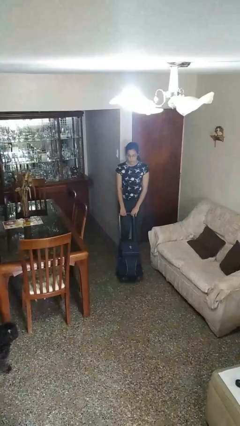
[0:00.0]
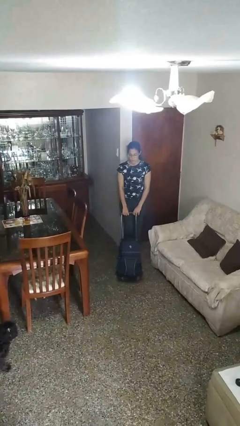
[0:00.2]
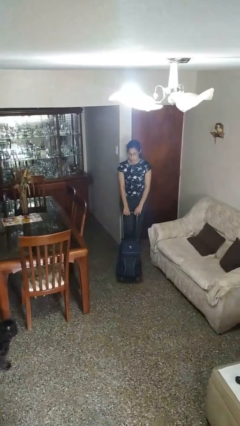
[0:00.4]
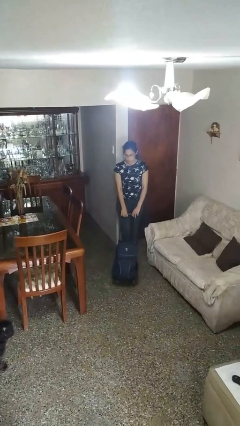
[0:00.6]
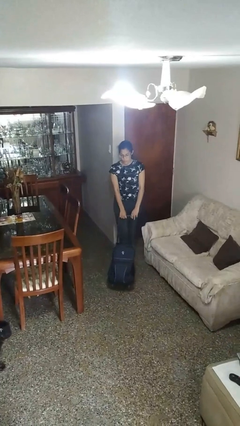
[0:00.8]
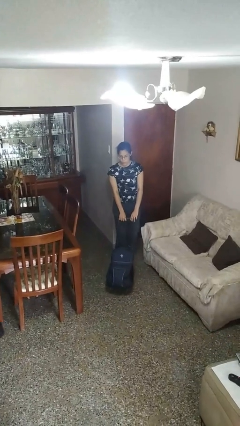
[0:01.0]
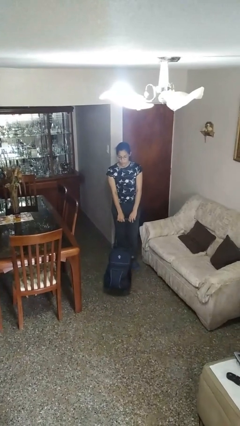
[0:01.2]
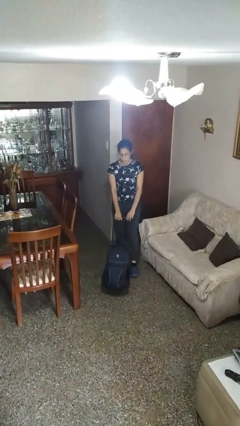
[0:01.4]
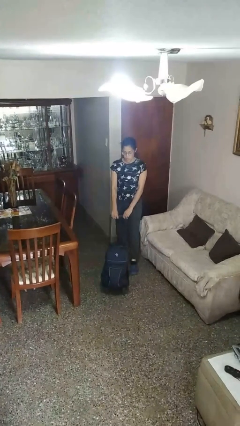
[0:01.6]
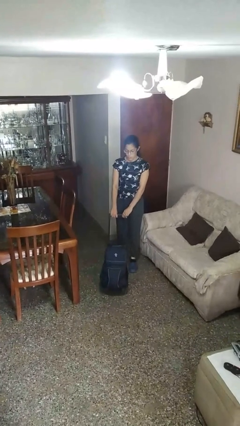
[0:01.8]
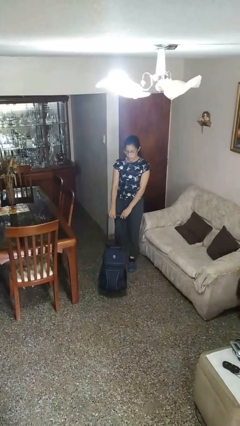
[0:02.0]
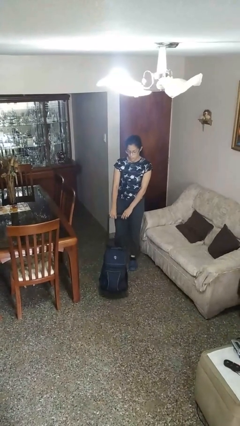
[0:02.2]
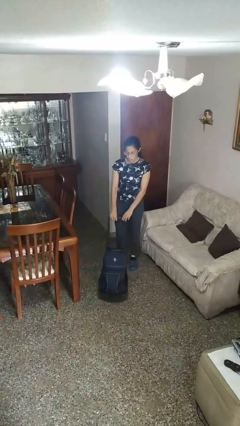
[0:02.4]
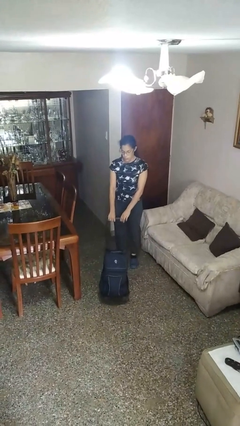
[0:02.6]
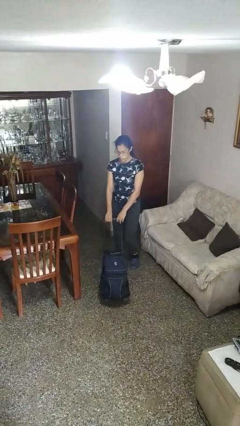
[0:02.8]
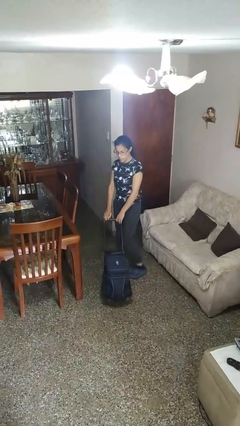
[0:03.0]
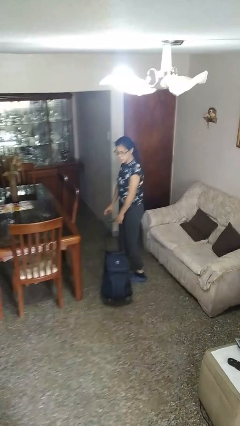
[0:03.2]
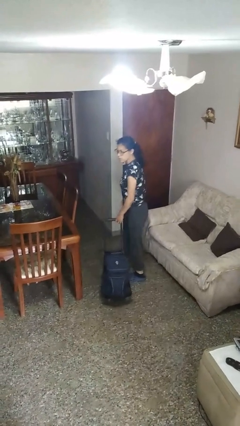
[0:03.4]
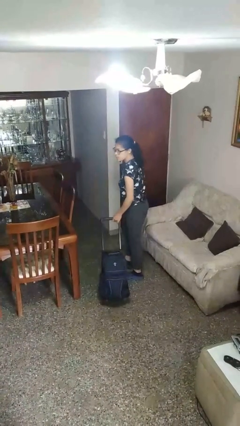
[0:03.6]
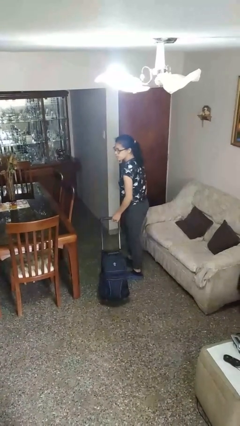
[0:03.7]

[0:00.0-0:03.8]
person pushes wheeled cart

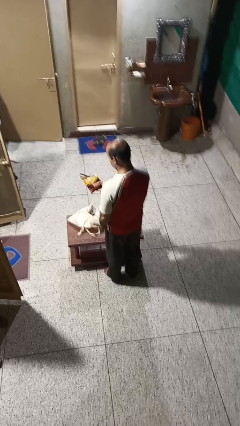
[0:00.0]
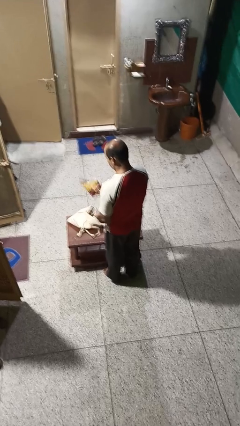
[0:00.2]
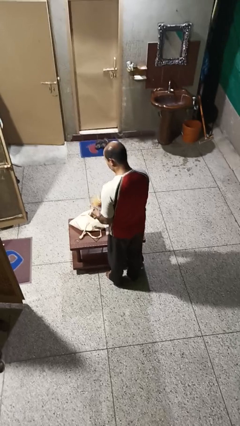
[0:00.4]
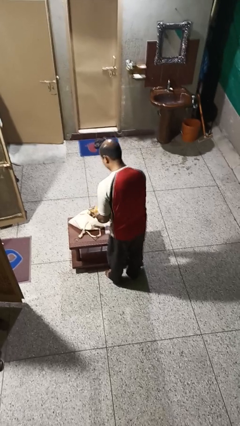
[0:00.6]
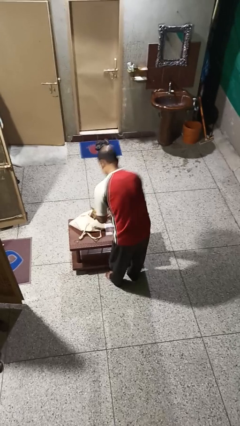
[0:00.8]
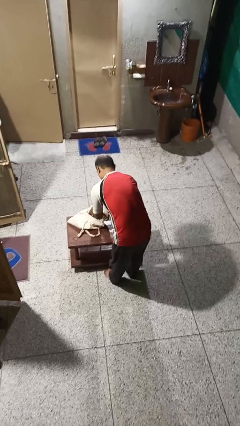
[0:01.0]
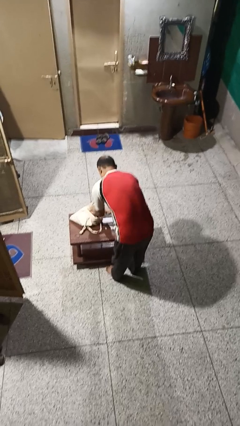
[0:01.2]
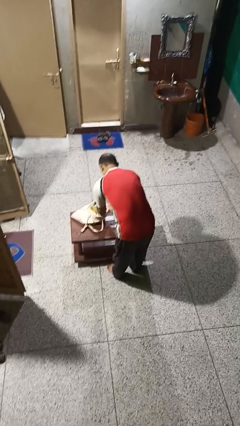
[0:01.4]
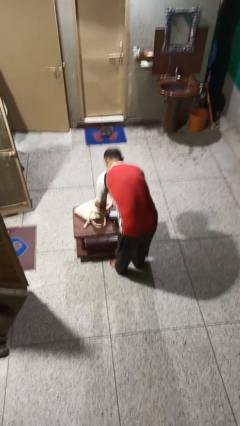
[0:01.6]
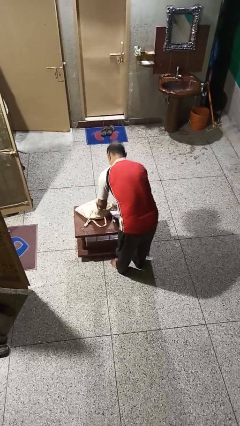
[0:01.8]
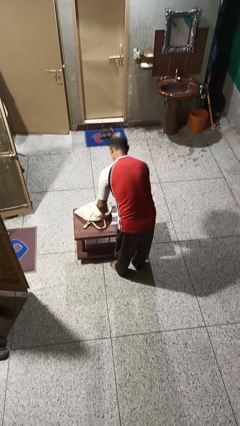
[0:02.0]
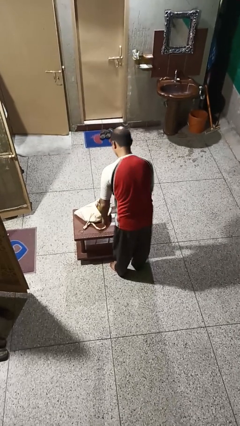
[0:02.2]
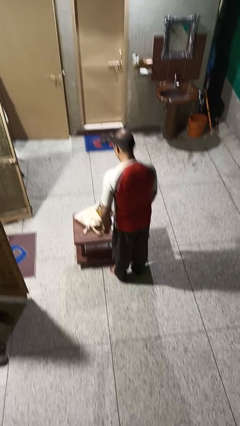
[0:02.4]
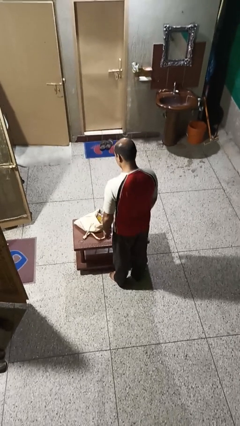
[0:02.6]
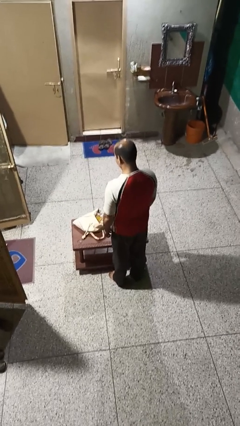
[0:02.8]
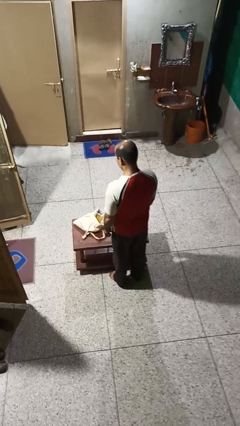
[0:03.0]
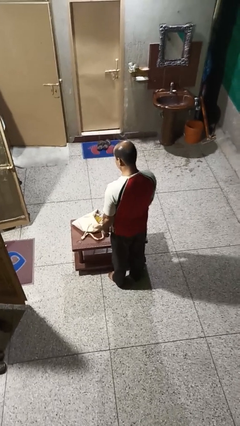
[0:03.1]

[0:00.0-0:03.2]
person puts object into bag

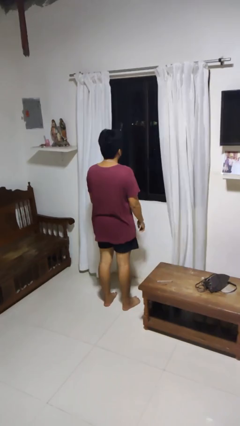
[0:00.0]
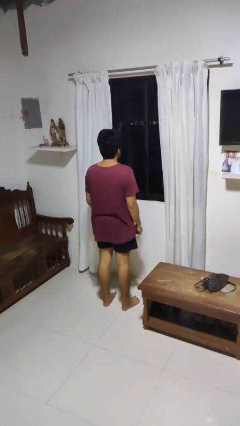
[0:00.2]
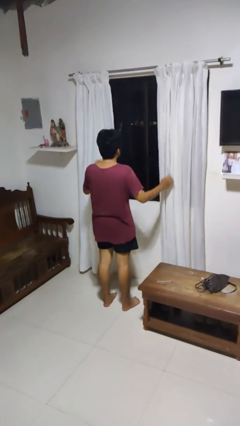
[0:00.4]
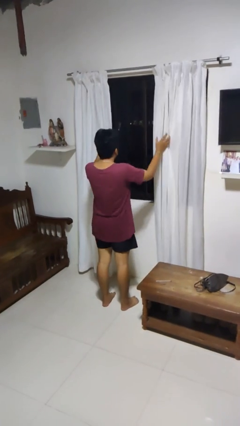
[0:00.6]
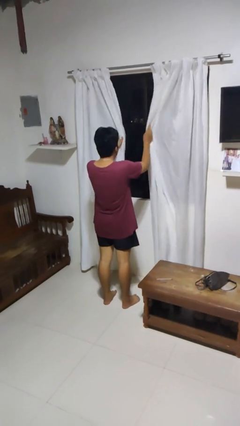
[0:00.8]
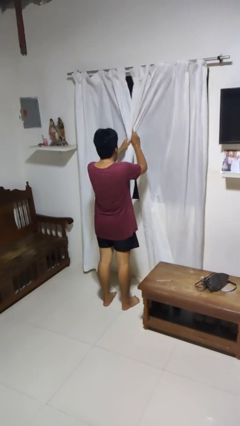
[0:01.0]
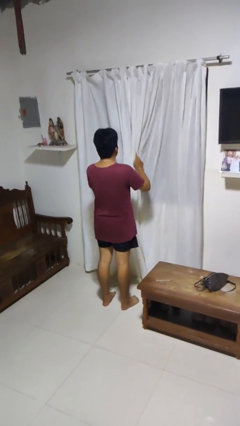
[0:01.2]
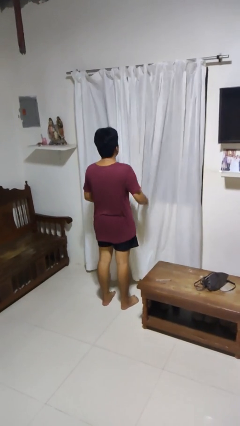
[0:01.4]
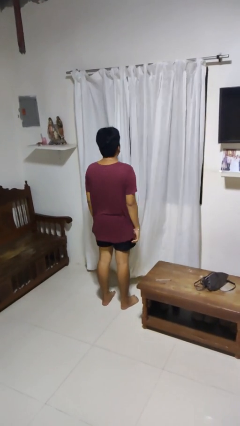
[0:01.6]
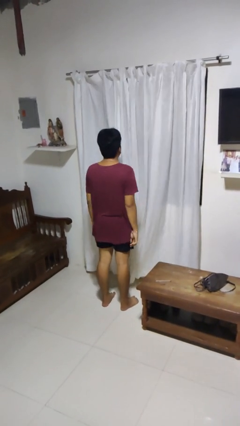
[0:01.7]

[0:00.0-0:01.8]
person closes curtains

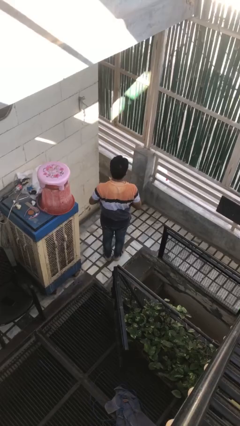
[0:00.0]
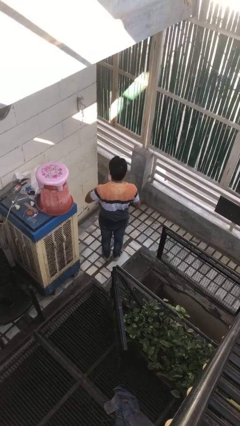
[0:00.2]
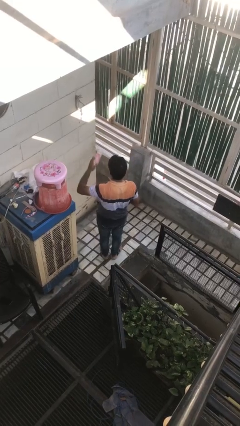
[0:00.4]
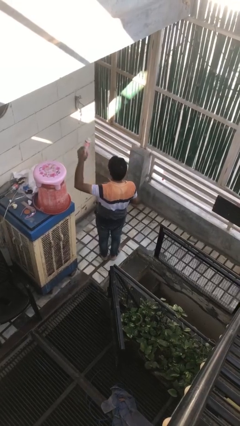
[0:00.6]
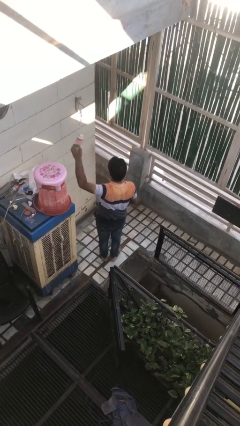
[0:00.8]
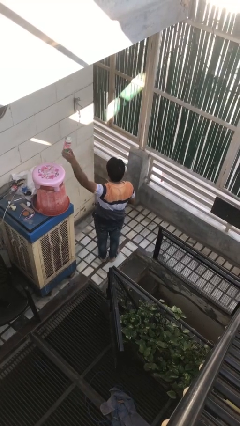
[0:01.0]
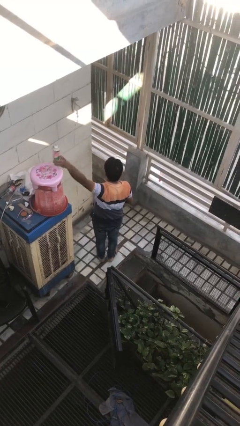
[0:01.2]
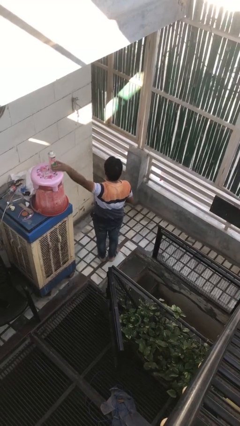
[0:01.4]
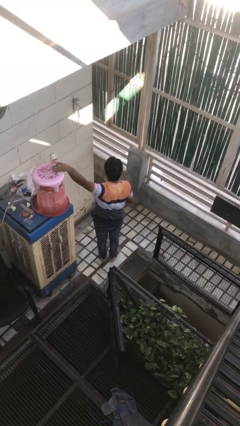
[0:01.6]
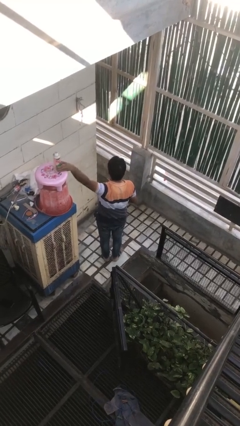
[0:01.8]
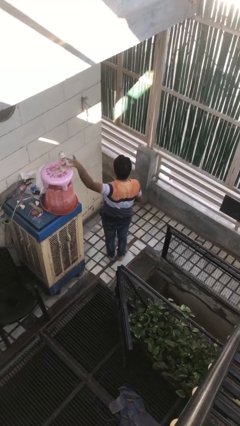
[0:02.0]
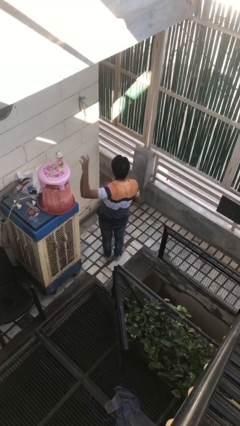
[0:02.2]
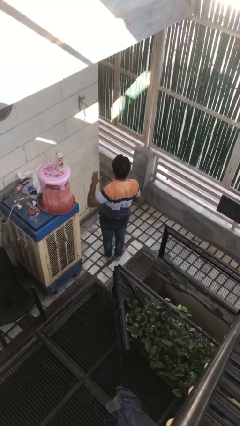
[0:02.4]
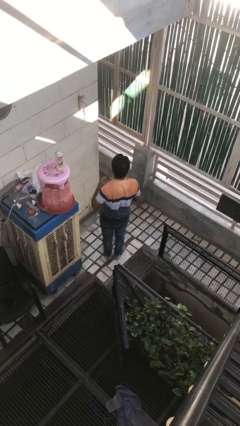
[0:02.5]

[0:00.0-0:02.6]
person puts down object on countertop

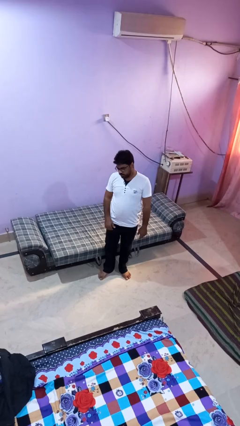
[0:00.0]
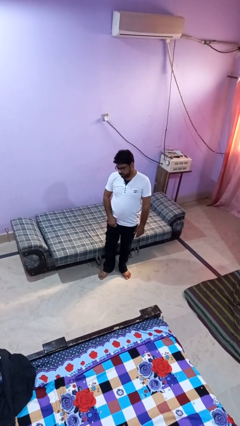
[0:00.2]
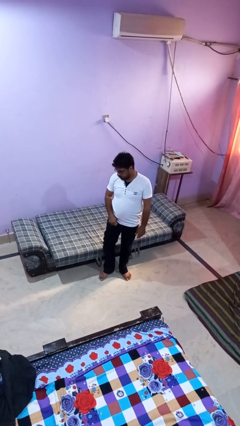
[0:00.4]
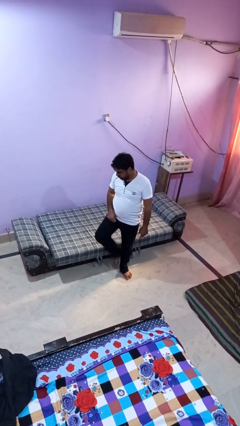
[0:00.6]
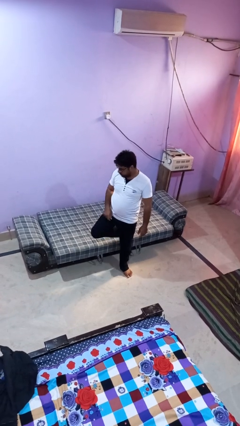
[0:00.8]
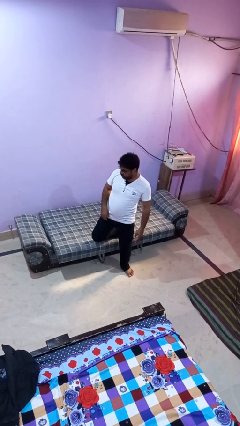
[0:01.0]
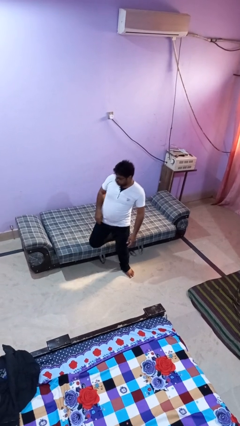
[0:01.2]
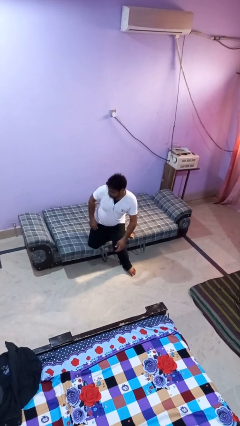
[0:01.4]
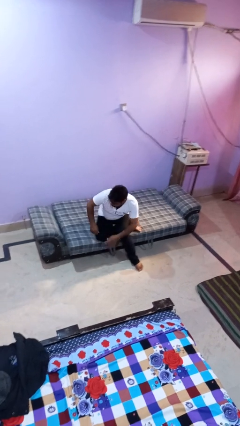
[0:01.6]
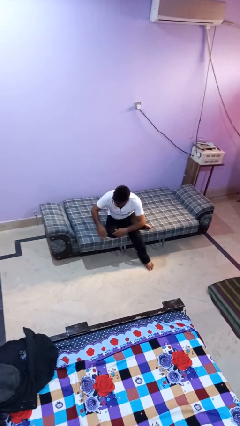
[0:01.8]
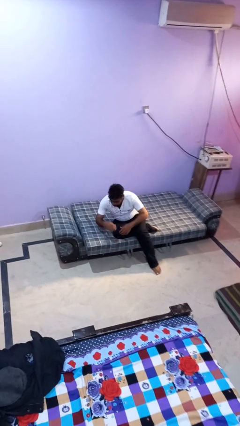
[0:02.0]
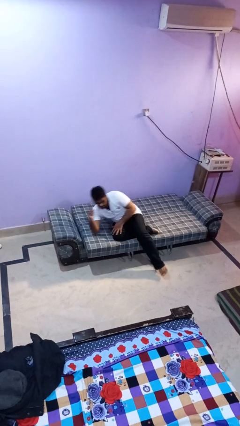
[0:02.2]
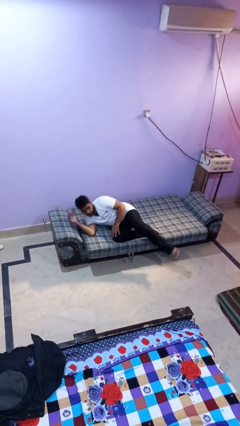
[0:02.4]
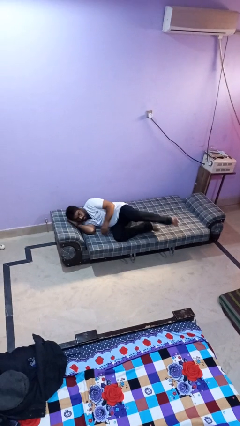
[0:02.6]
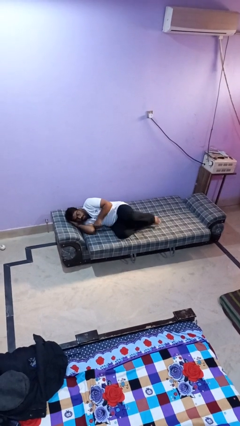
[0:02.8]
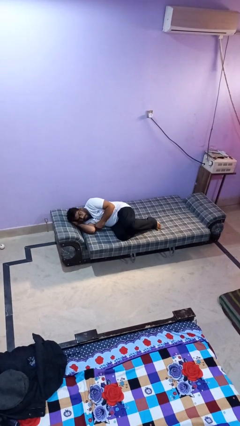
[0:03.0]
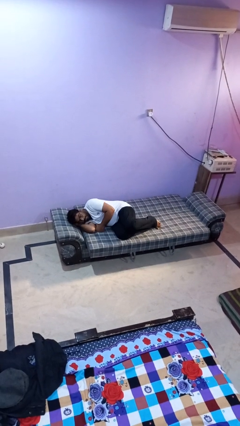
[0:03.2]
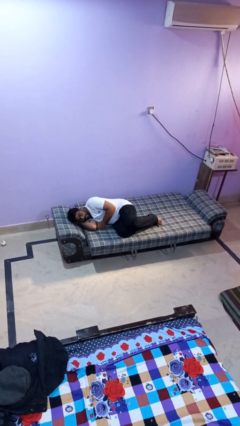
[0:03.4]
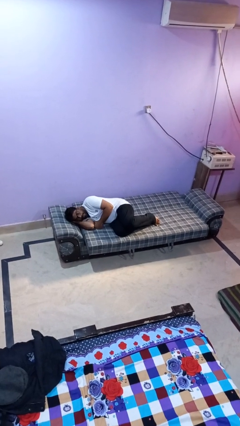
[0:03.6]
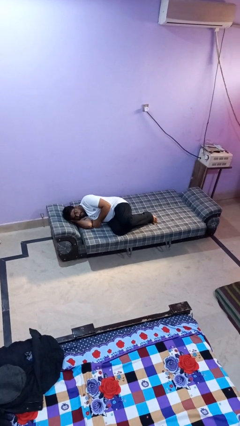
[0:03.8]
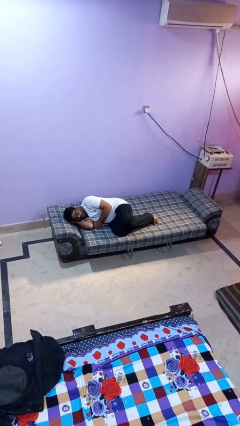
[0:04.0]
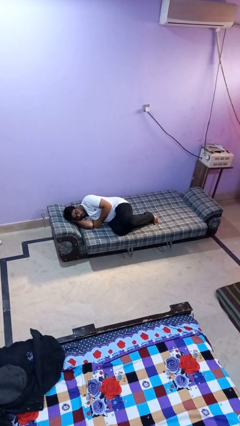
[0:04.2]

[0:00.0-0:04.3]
person lies down on bed

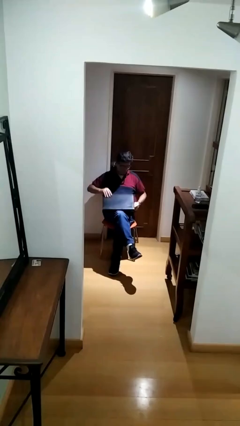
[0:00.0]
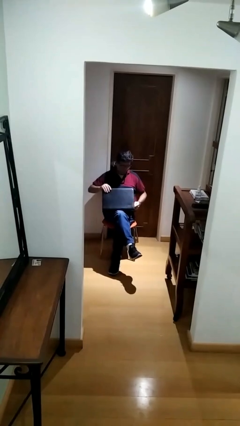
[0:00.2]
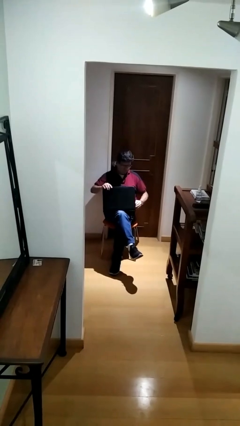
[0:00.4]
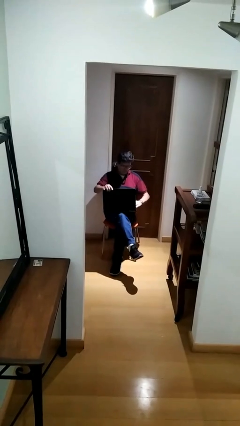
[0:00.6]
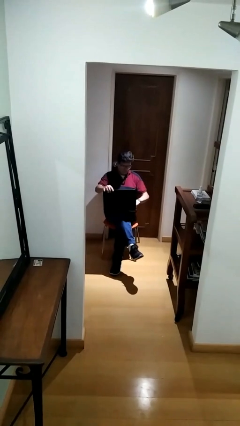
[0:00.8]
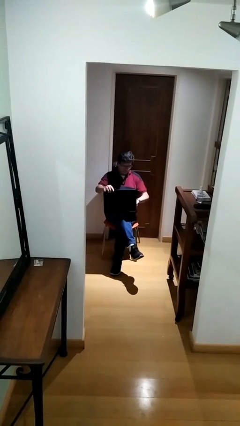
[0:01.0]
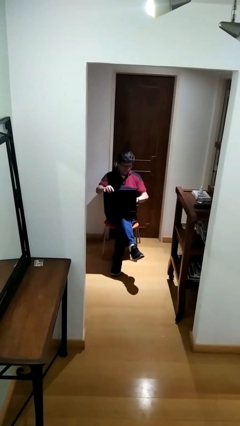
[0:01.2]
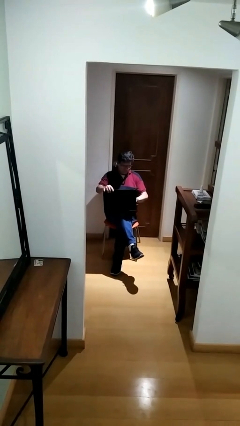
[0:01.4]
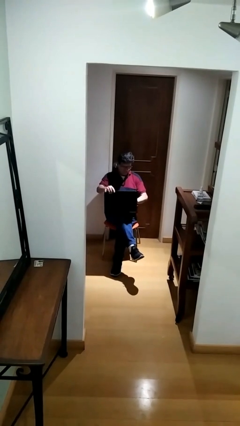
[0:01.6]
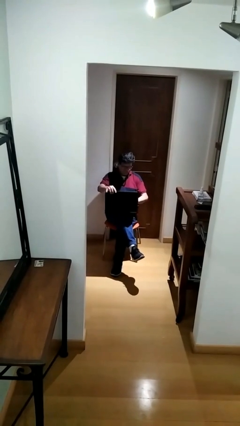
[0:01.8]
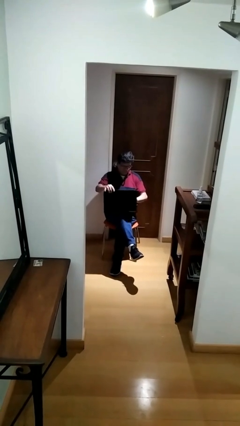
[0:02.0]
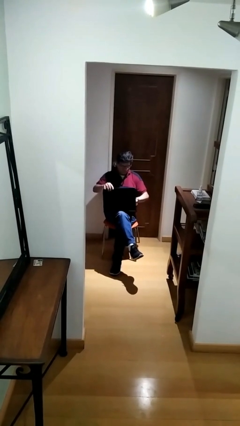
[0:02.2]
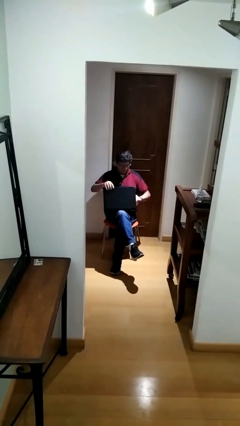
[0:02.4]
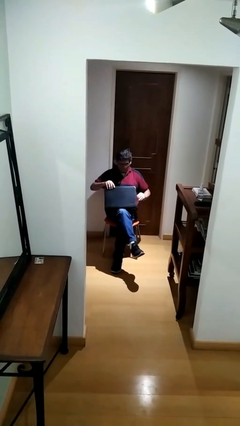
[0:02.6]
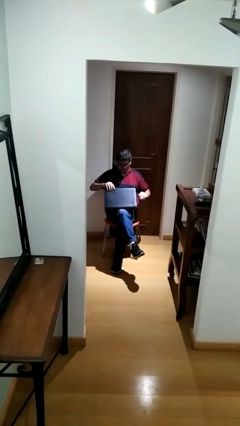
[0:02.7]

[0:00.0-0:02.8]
person interacts with laptop
